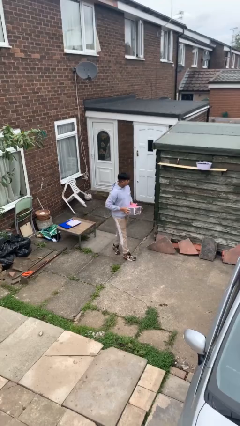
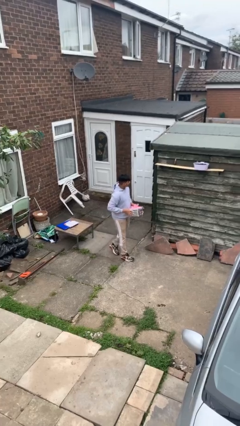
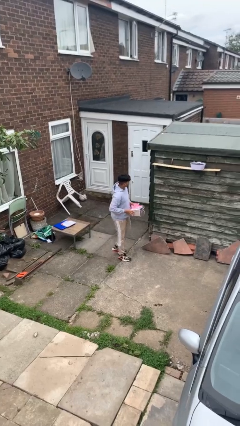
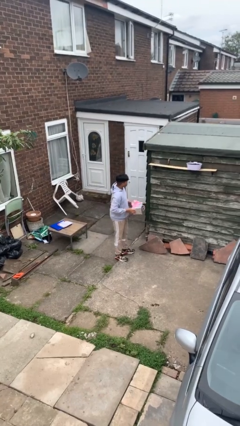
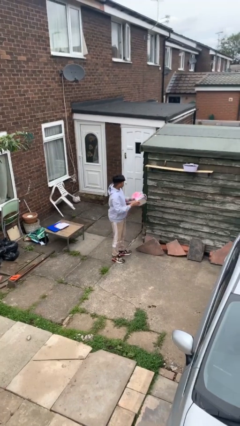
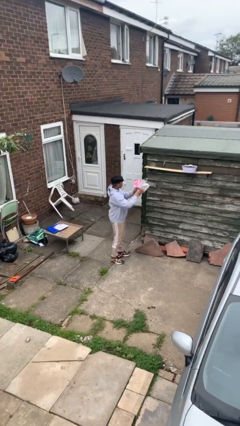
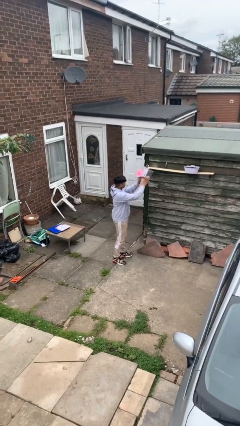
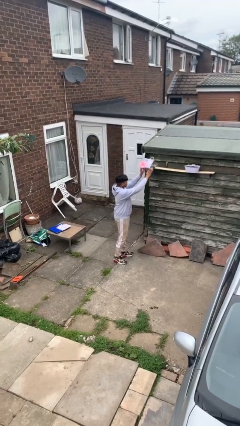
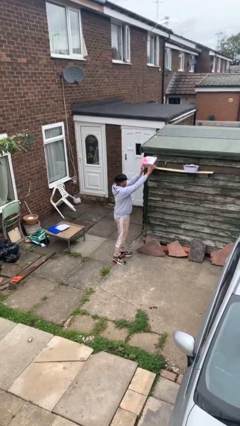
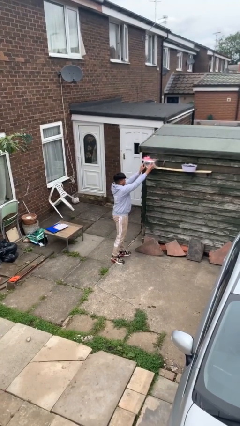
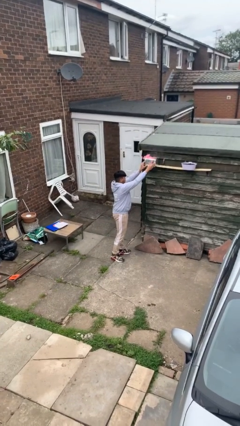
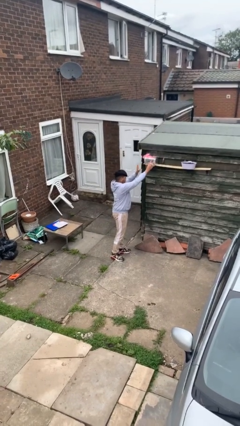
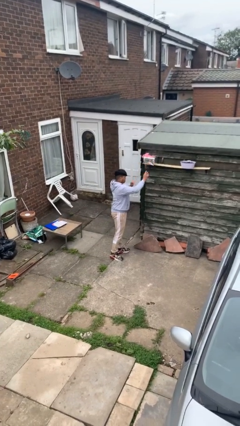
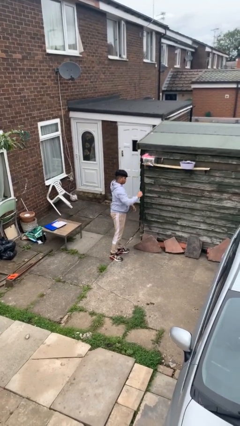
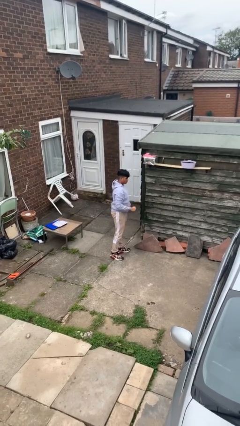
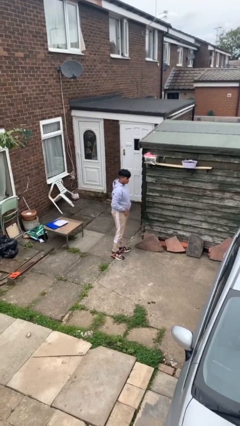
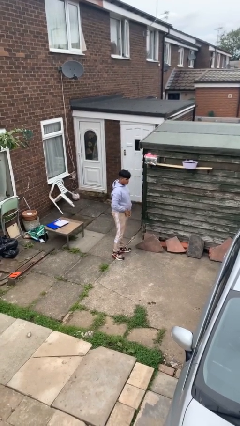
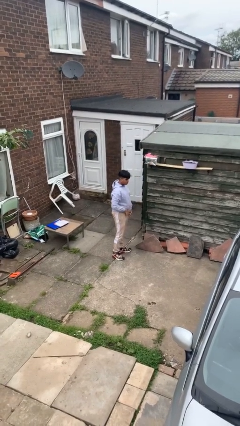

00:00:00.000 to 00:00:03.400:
person puts down object on shelf

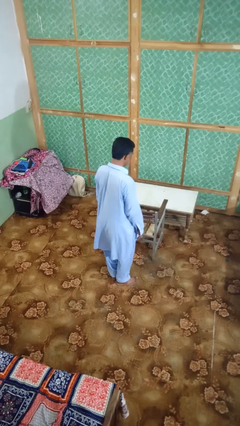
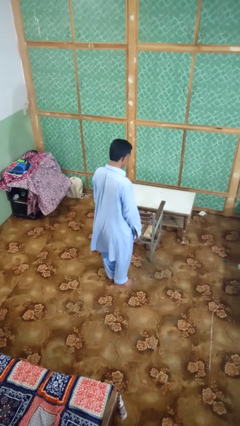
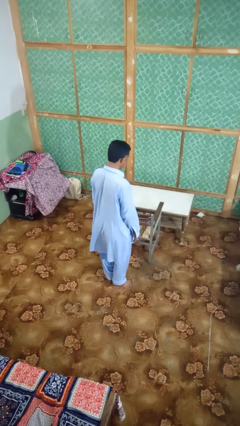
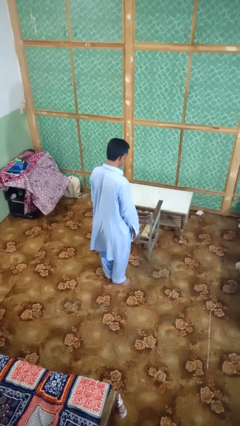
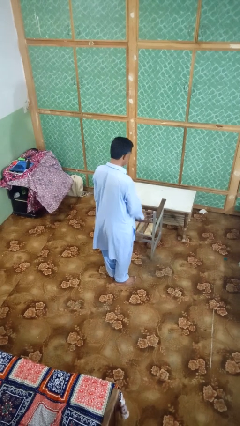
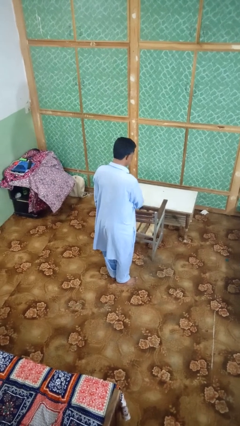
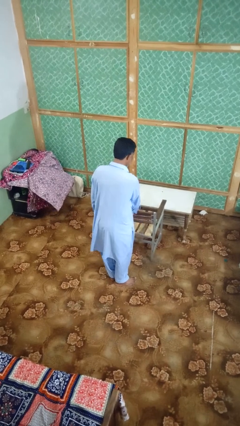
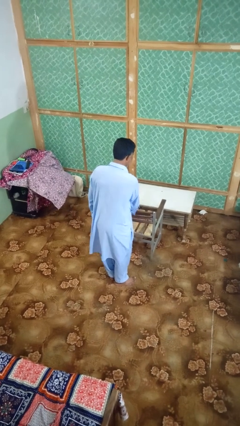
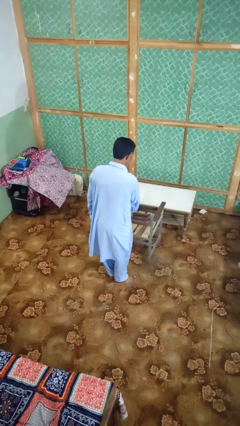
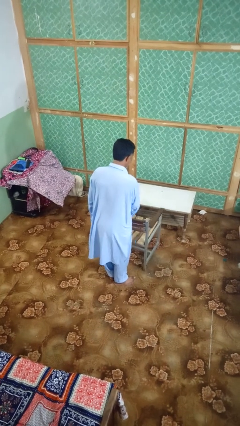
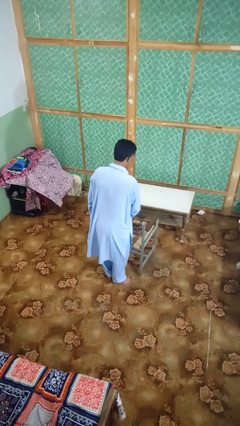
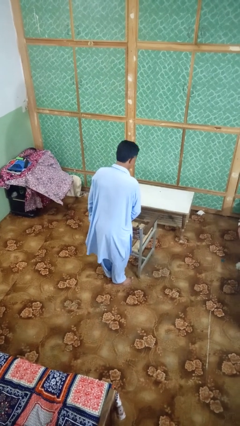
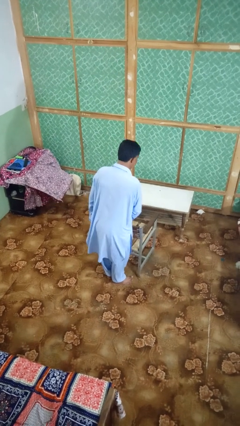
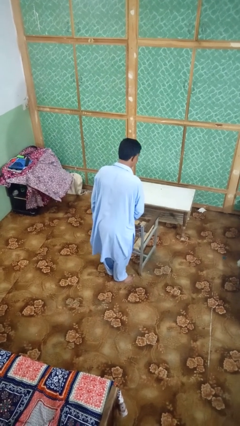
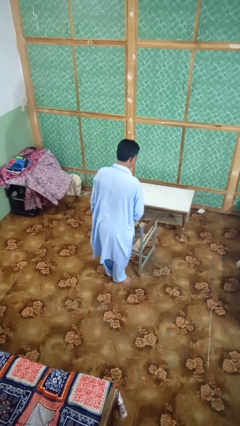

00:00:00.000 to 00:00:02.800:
person pulls out chair

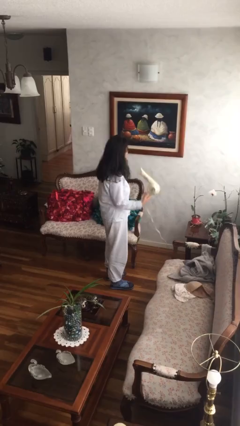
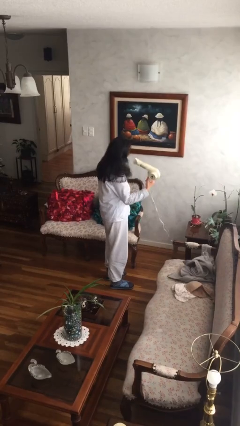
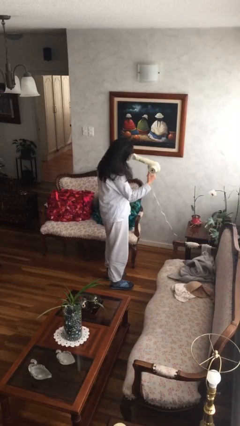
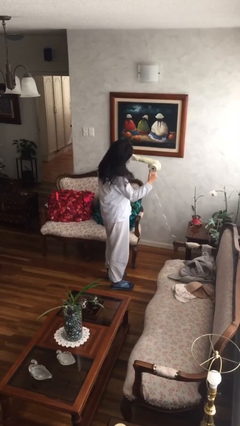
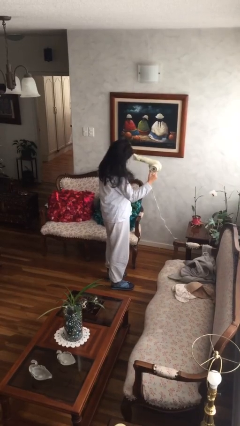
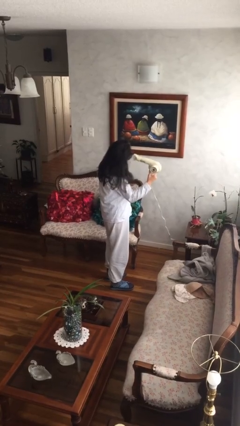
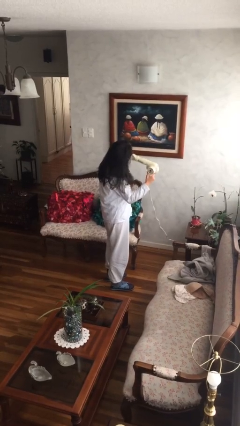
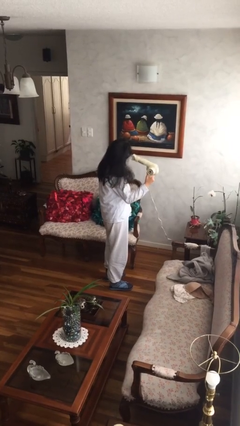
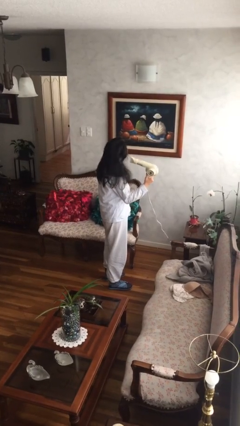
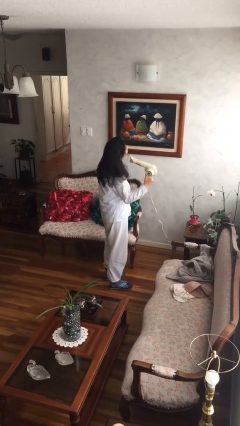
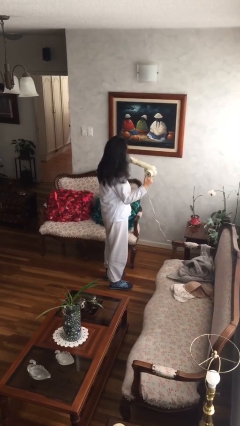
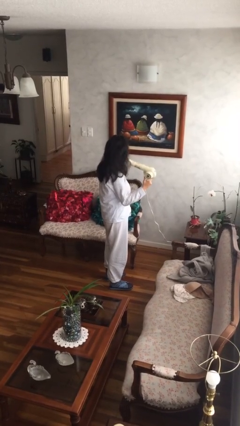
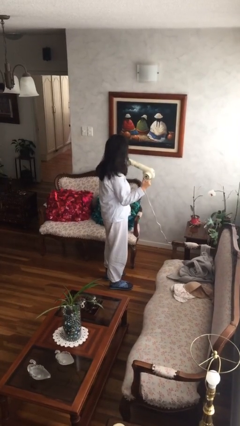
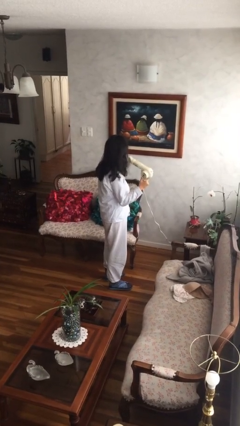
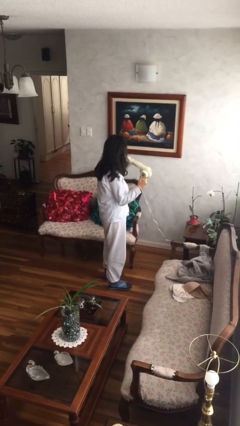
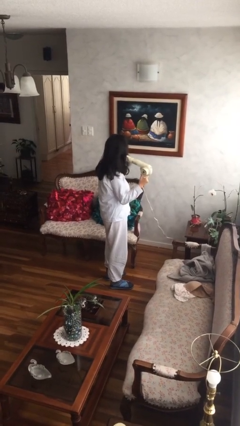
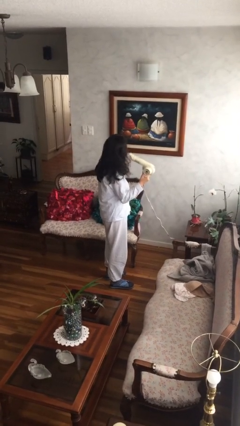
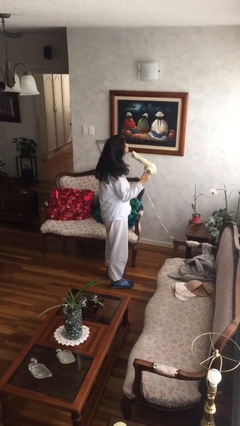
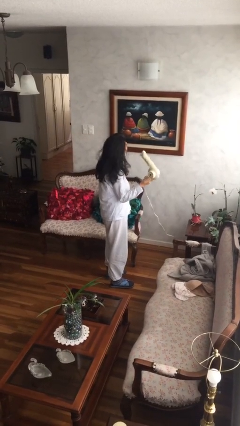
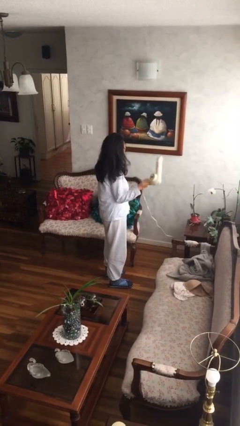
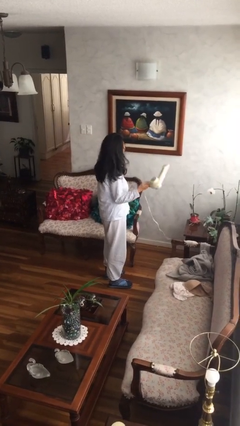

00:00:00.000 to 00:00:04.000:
person dries hair with hairdryer

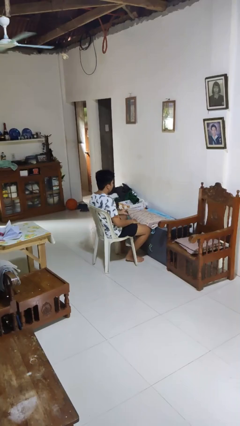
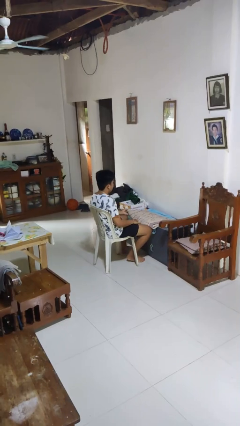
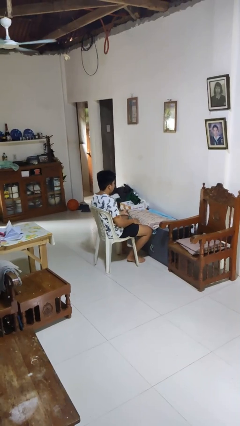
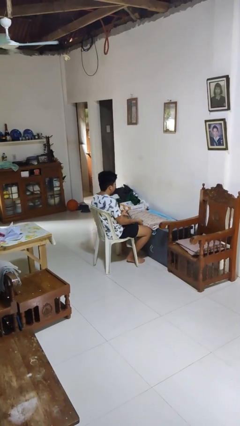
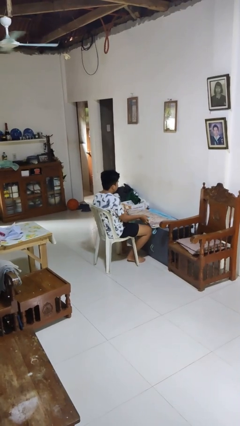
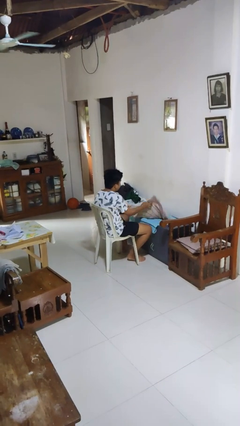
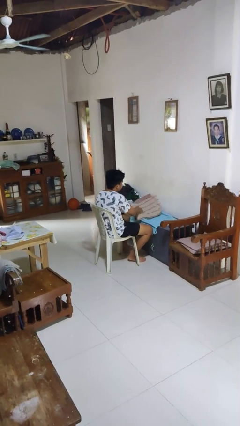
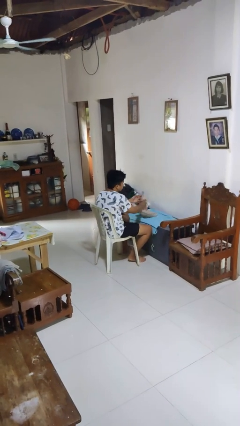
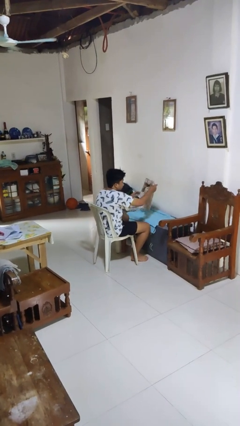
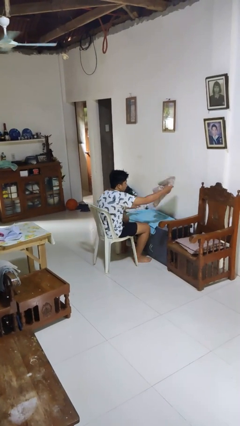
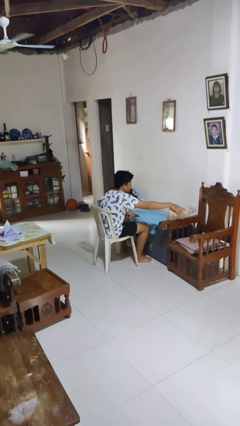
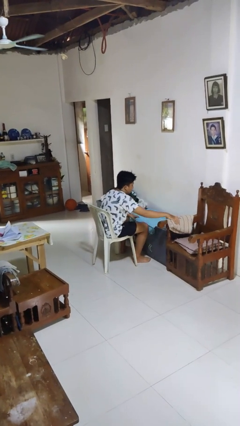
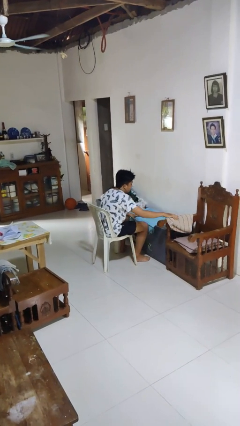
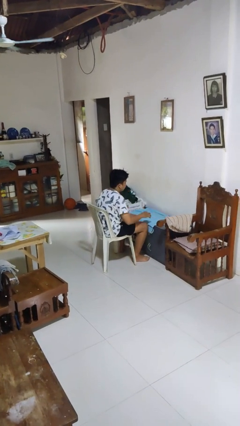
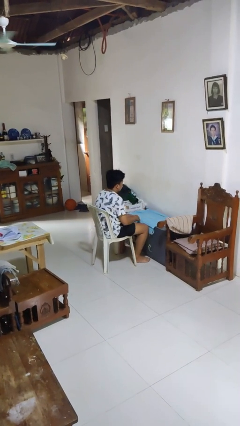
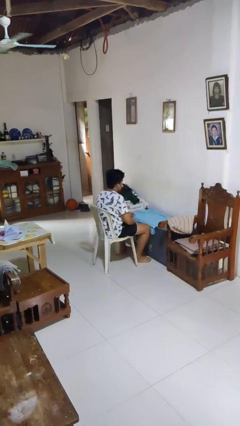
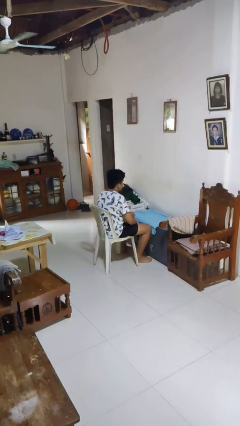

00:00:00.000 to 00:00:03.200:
person folds towel

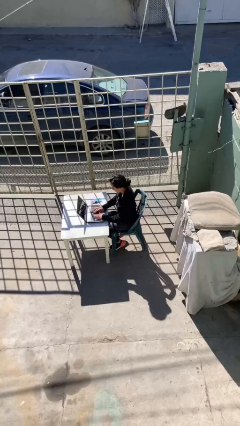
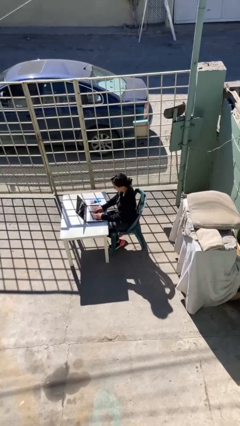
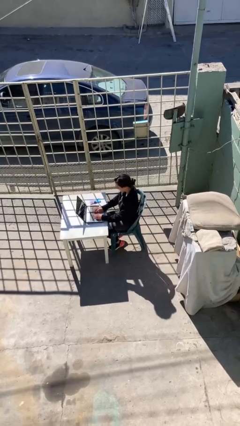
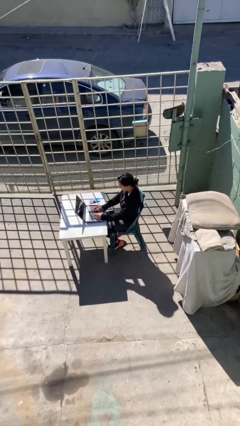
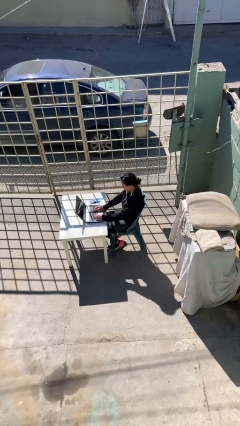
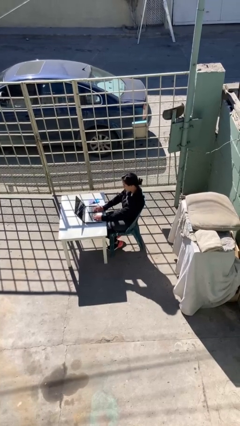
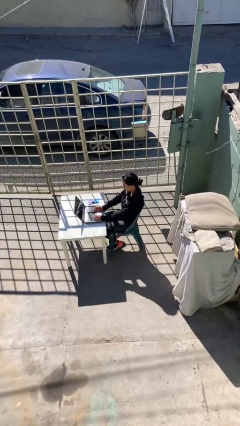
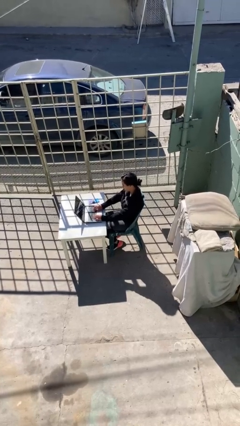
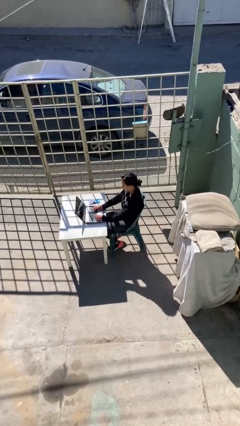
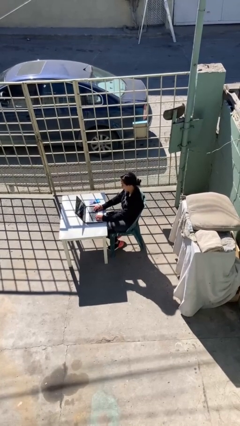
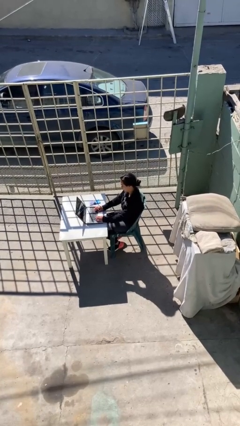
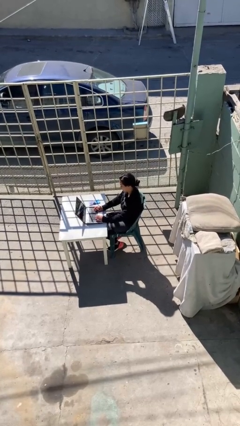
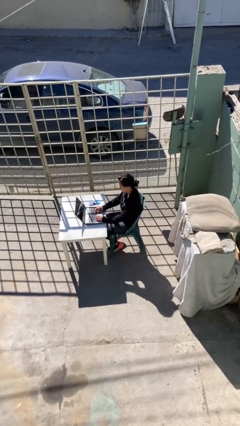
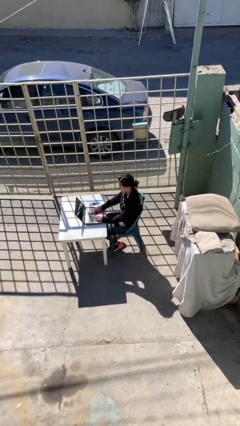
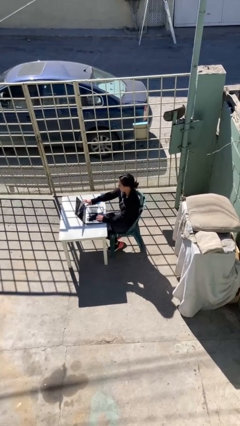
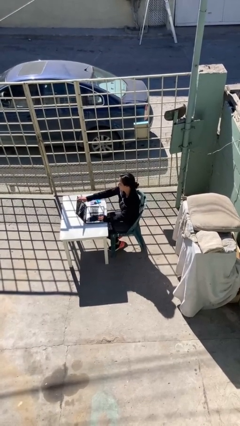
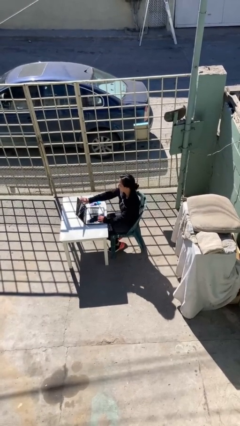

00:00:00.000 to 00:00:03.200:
person interacts with laptop

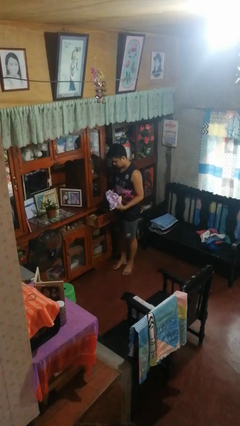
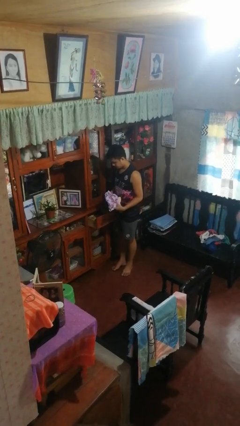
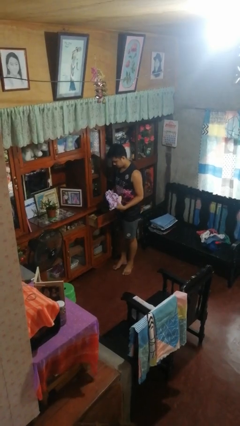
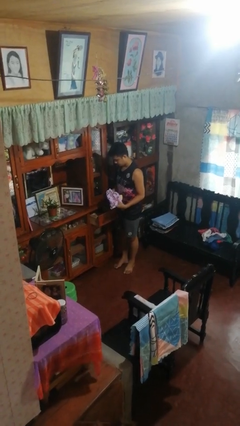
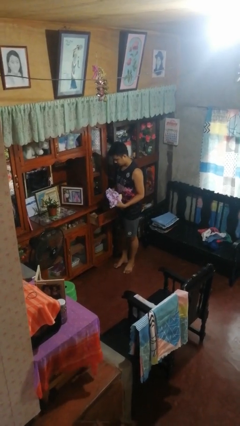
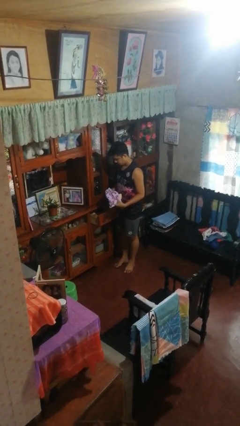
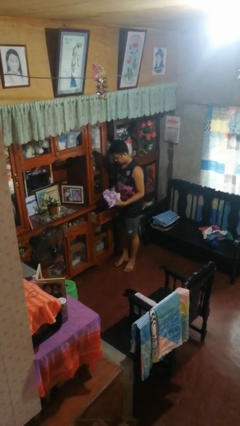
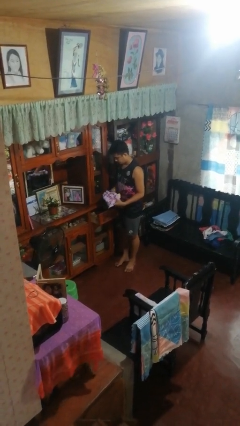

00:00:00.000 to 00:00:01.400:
person puts clothes into dresser
